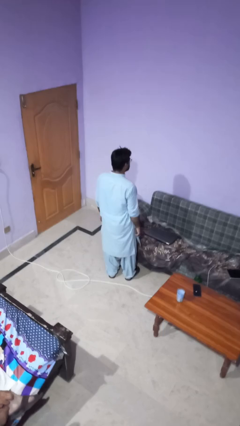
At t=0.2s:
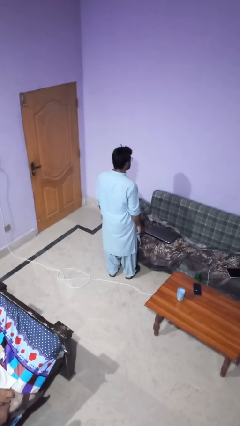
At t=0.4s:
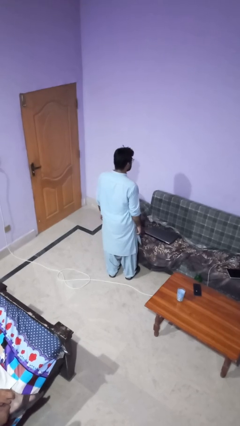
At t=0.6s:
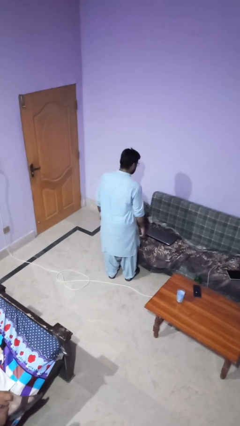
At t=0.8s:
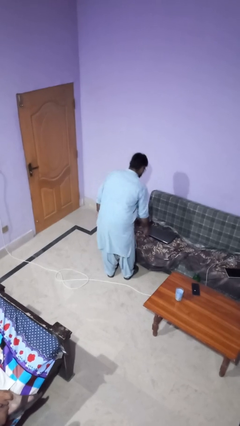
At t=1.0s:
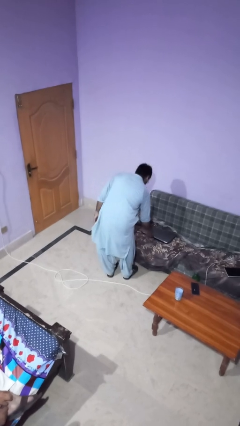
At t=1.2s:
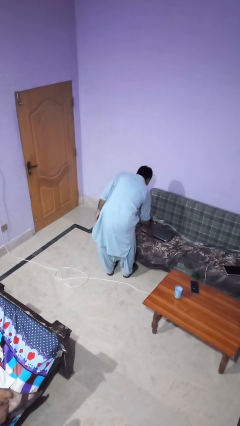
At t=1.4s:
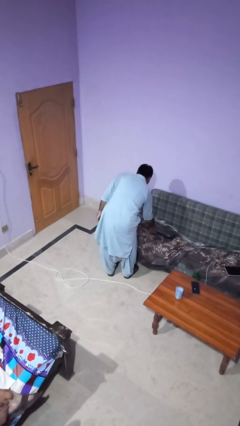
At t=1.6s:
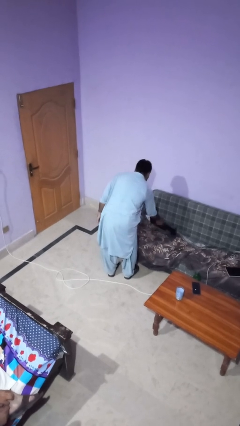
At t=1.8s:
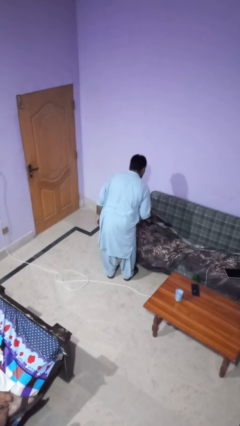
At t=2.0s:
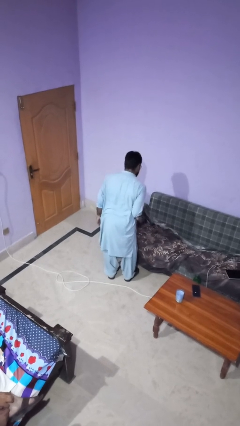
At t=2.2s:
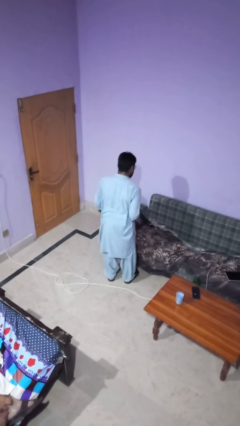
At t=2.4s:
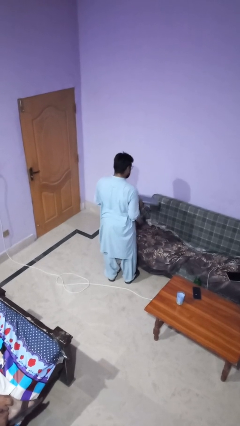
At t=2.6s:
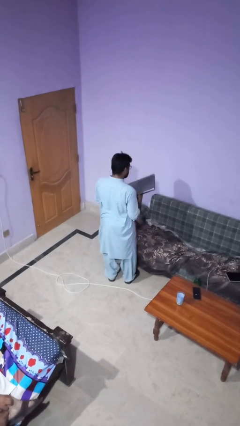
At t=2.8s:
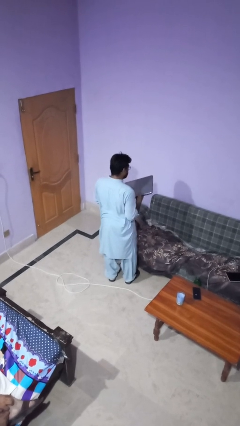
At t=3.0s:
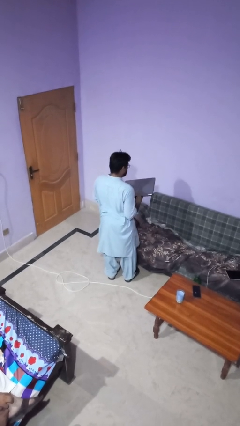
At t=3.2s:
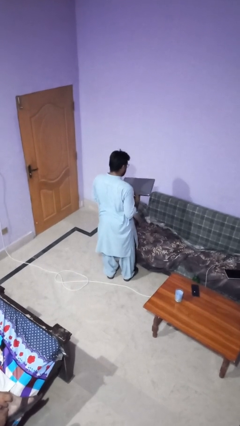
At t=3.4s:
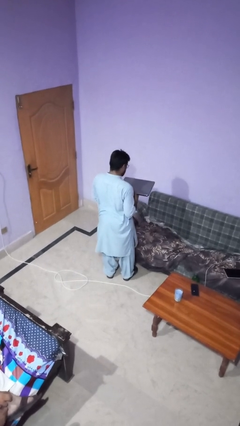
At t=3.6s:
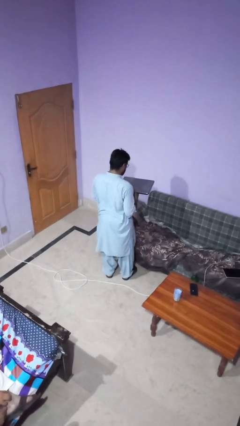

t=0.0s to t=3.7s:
person picks up object from couch

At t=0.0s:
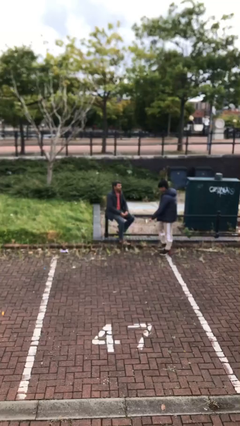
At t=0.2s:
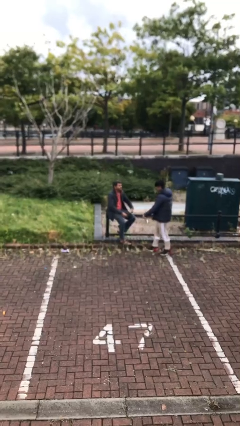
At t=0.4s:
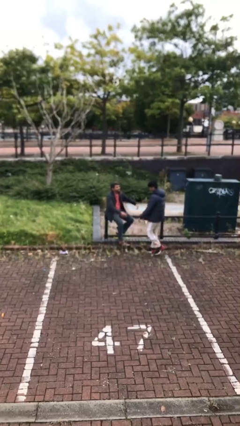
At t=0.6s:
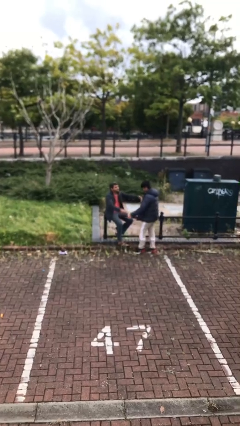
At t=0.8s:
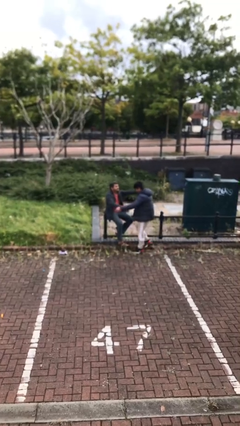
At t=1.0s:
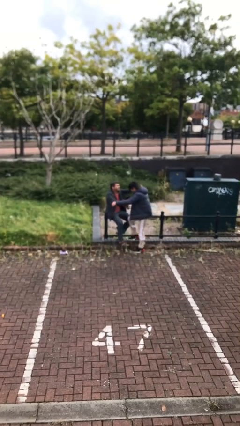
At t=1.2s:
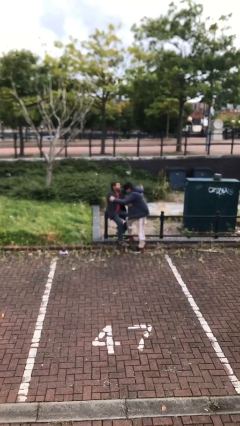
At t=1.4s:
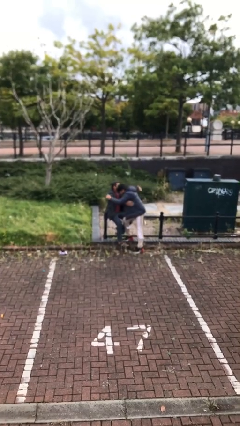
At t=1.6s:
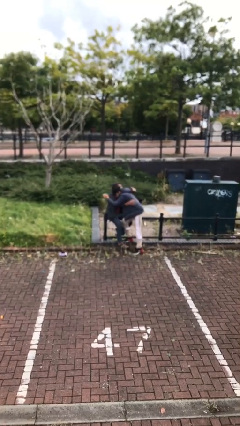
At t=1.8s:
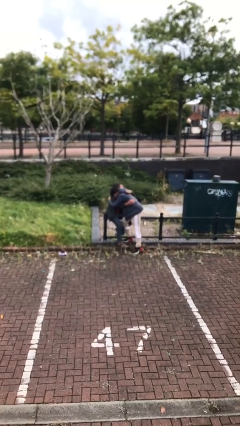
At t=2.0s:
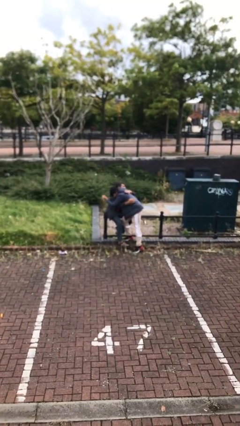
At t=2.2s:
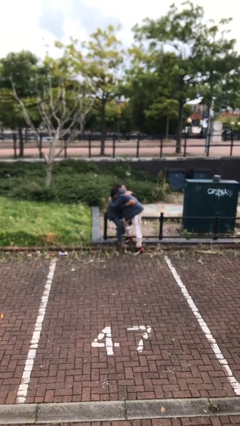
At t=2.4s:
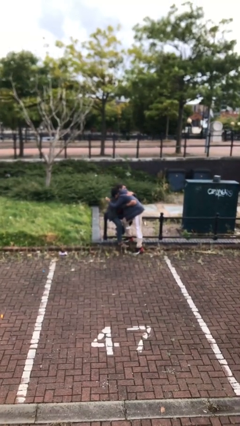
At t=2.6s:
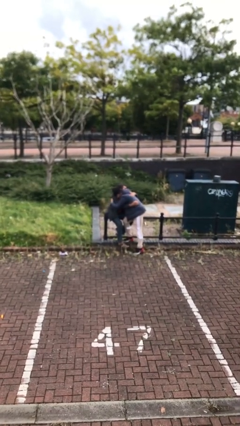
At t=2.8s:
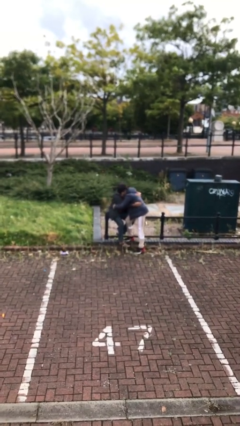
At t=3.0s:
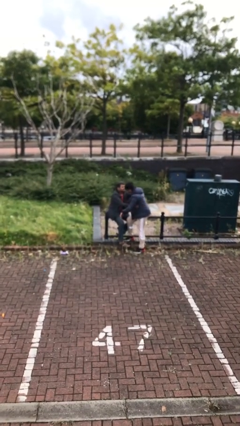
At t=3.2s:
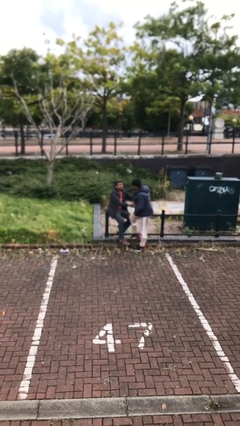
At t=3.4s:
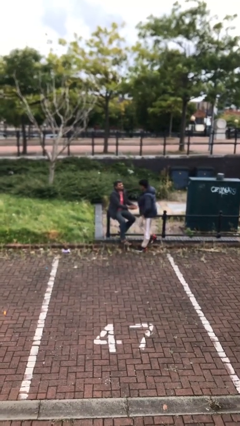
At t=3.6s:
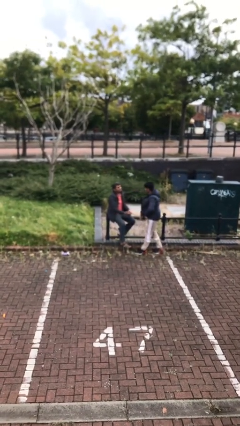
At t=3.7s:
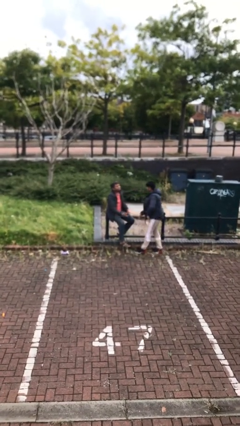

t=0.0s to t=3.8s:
person embraces person

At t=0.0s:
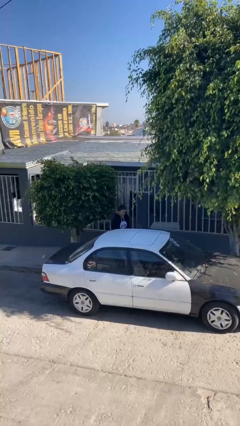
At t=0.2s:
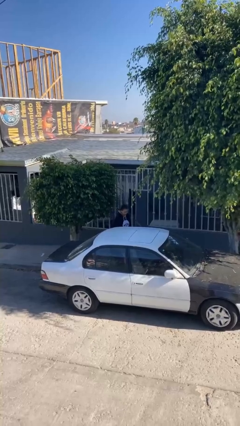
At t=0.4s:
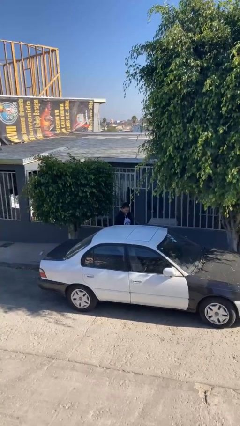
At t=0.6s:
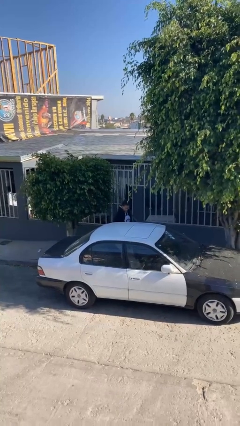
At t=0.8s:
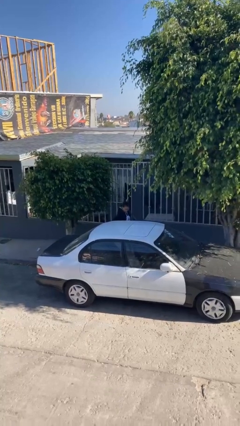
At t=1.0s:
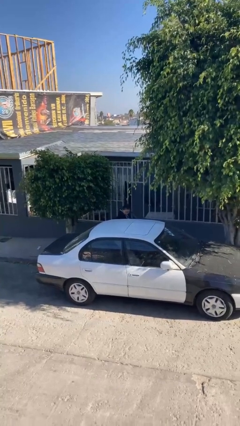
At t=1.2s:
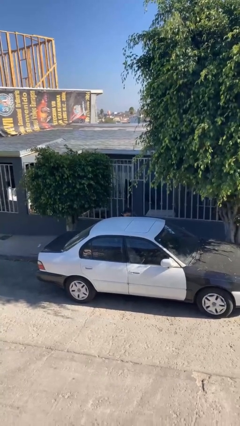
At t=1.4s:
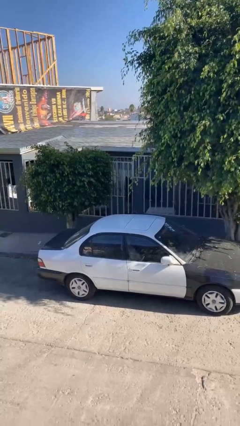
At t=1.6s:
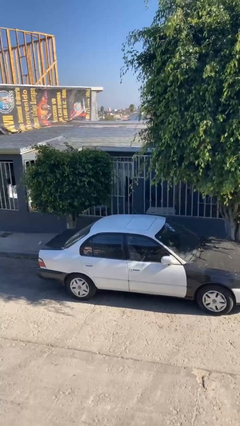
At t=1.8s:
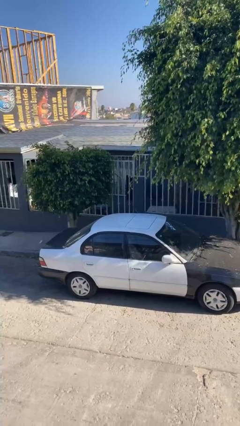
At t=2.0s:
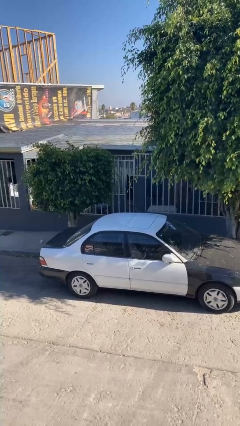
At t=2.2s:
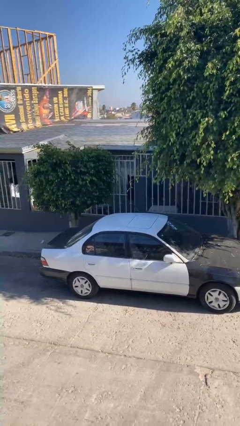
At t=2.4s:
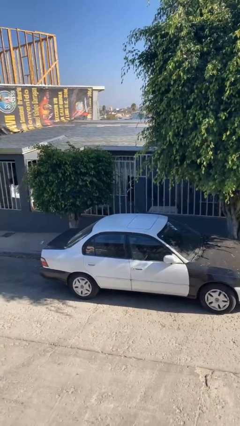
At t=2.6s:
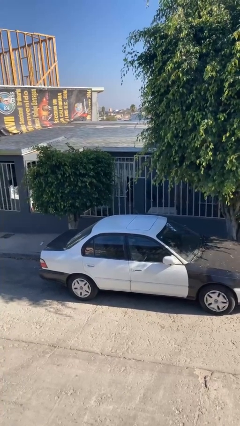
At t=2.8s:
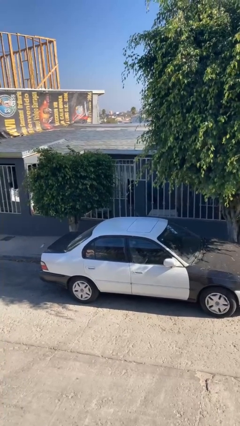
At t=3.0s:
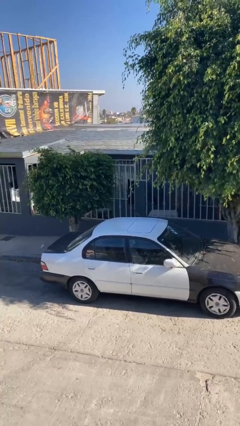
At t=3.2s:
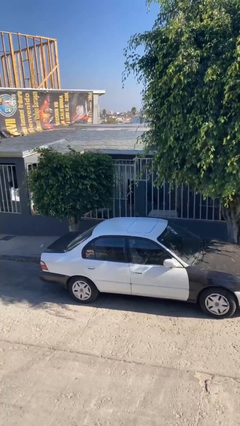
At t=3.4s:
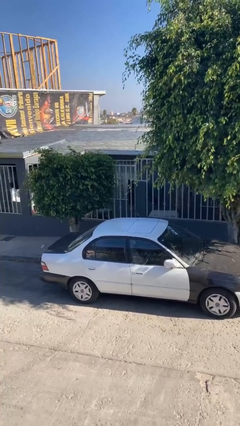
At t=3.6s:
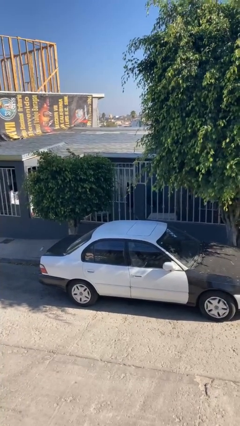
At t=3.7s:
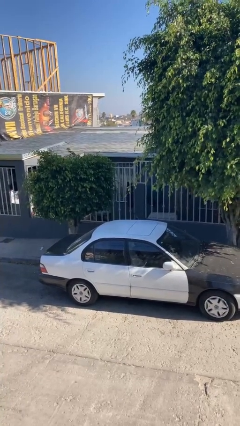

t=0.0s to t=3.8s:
person enters car

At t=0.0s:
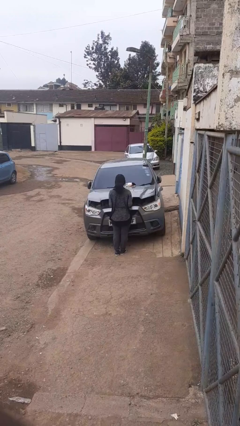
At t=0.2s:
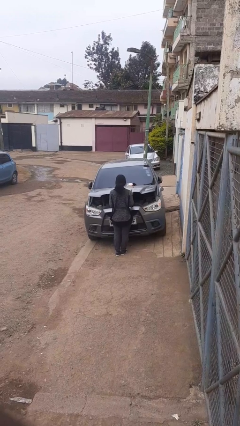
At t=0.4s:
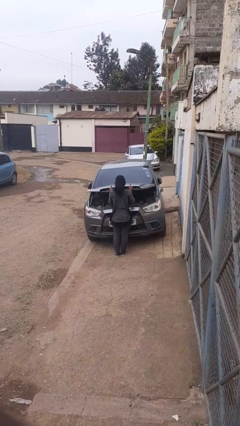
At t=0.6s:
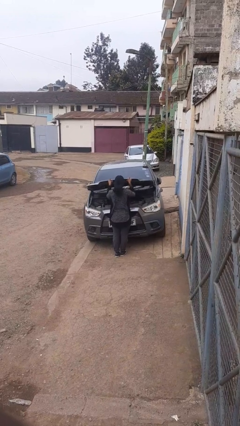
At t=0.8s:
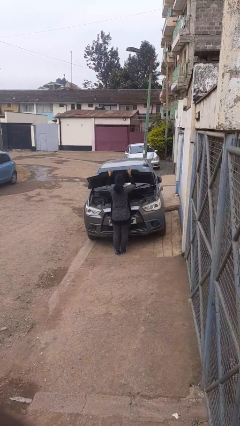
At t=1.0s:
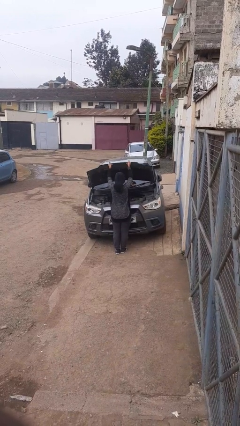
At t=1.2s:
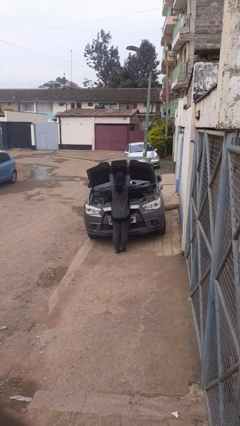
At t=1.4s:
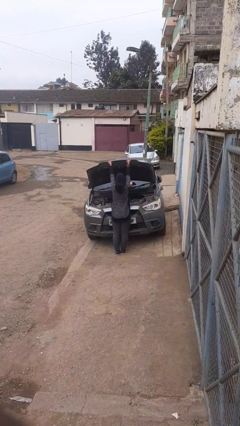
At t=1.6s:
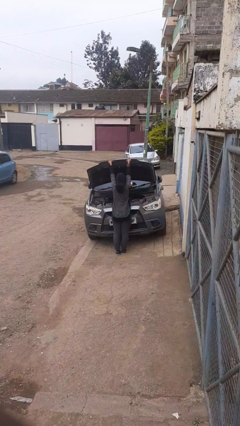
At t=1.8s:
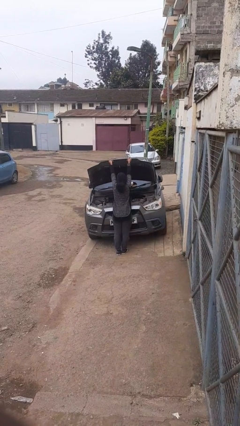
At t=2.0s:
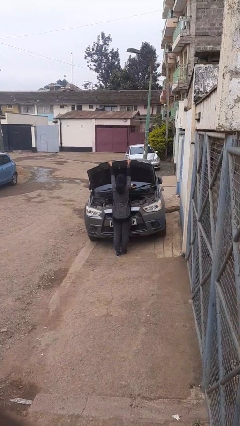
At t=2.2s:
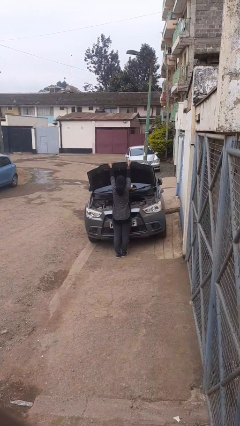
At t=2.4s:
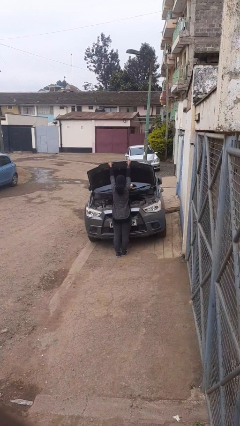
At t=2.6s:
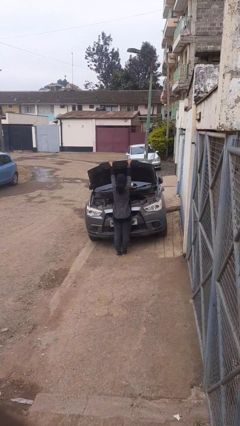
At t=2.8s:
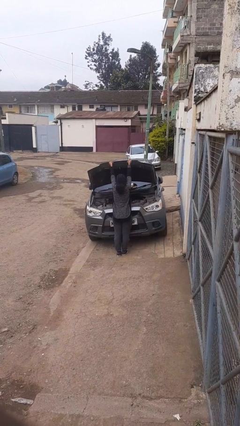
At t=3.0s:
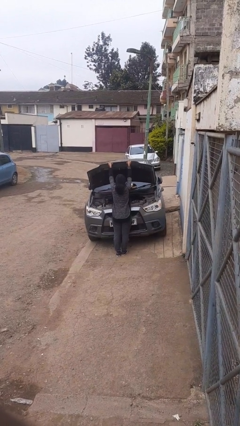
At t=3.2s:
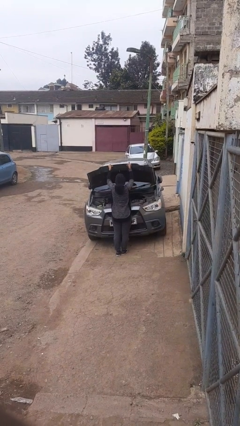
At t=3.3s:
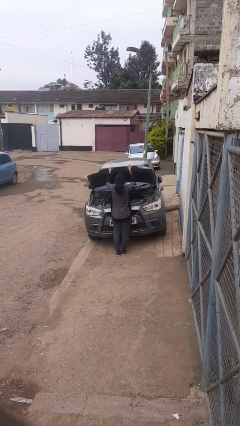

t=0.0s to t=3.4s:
person opens car hood

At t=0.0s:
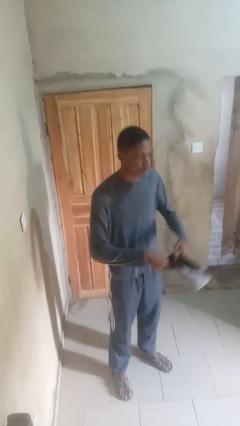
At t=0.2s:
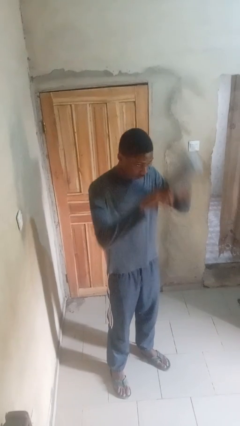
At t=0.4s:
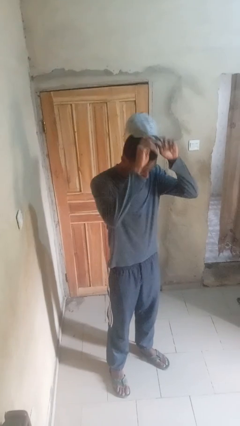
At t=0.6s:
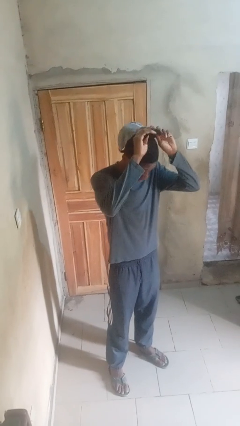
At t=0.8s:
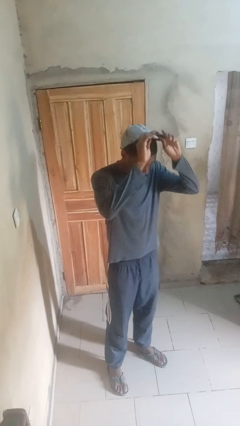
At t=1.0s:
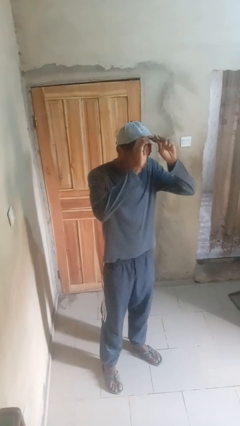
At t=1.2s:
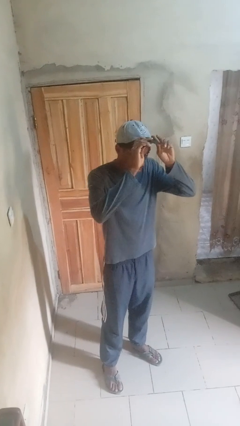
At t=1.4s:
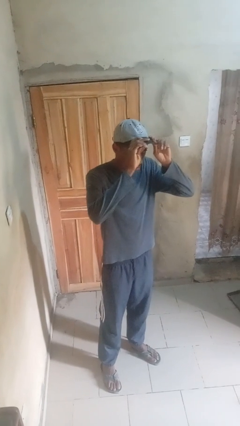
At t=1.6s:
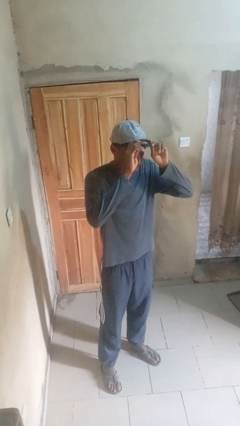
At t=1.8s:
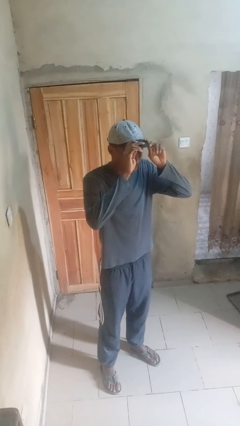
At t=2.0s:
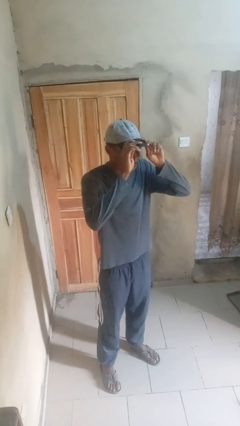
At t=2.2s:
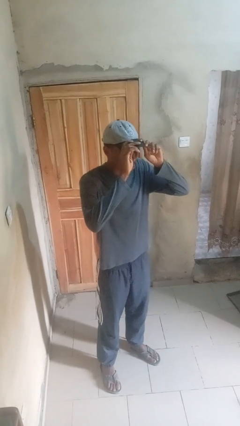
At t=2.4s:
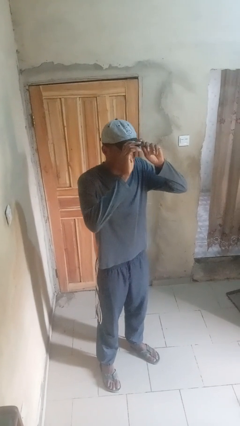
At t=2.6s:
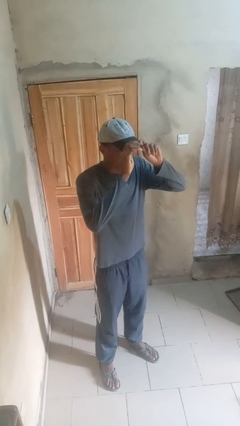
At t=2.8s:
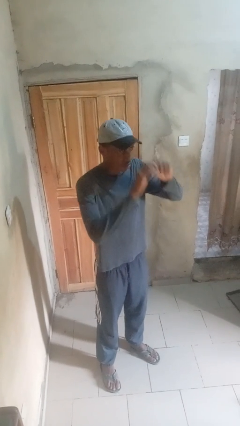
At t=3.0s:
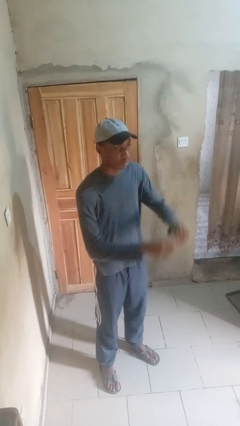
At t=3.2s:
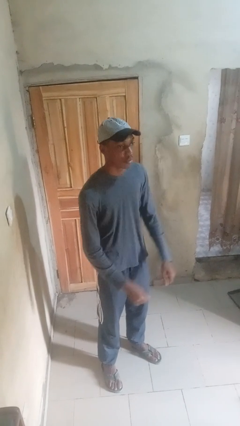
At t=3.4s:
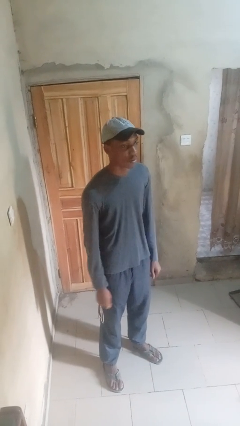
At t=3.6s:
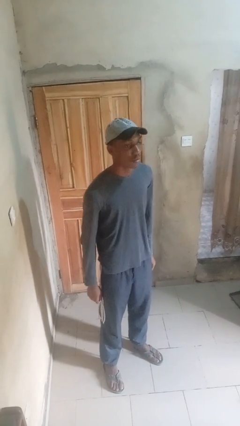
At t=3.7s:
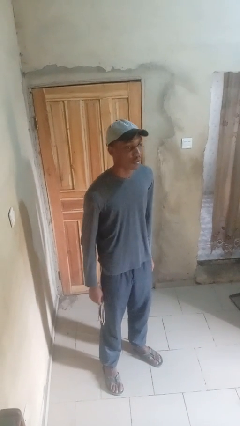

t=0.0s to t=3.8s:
person puts on hat
